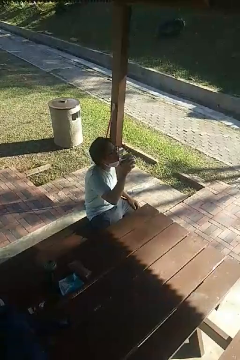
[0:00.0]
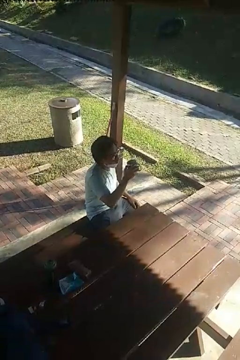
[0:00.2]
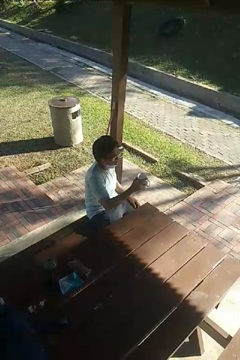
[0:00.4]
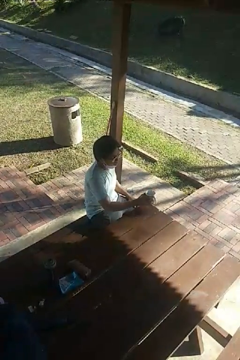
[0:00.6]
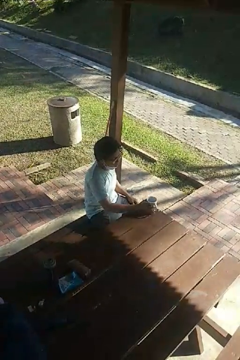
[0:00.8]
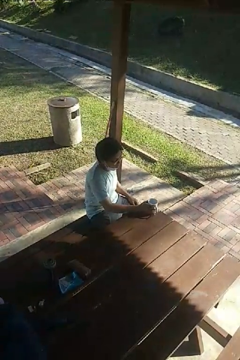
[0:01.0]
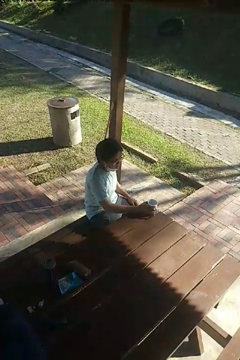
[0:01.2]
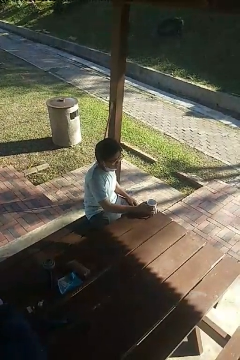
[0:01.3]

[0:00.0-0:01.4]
person puts down object on table

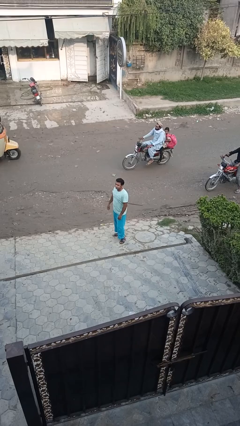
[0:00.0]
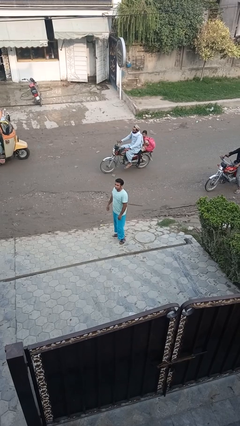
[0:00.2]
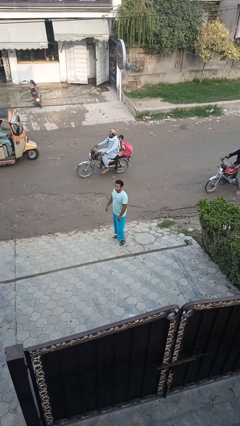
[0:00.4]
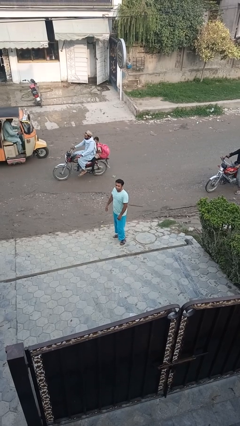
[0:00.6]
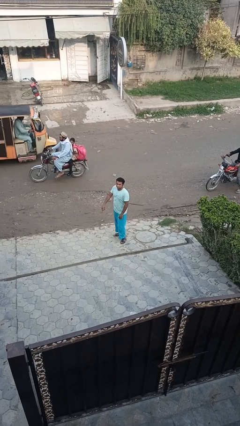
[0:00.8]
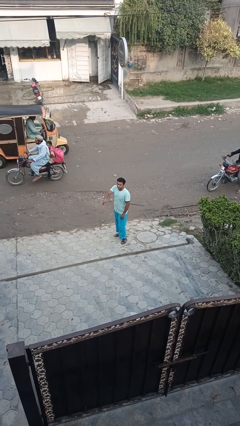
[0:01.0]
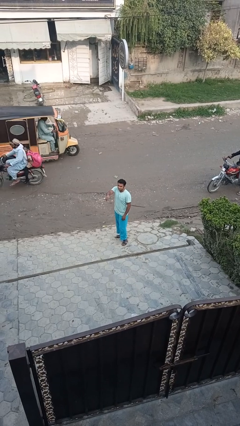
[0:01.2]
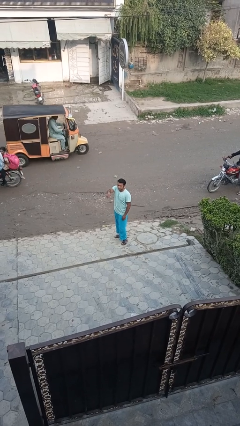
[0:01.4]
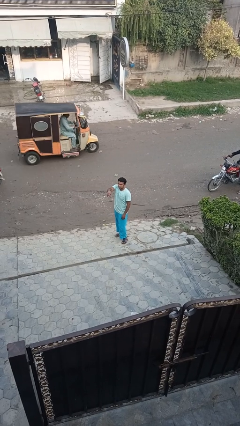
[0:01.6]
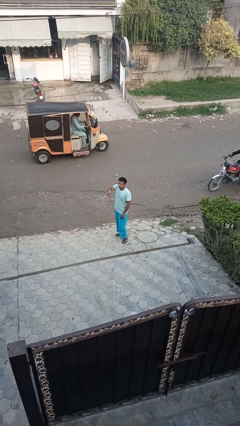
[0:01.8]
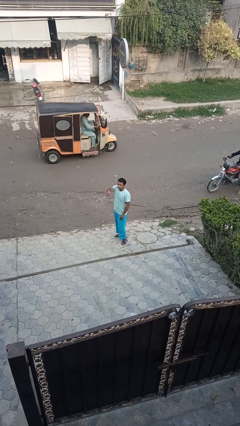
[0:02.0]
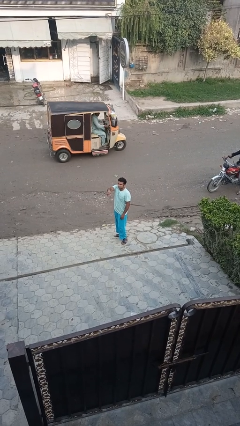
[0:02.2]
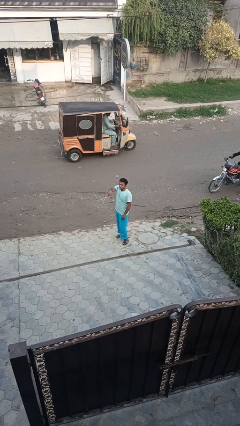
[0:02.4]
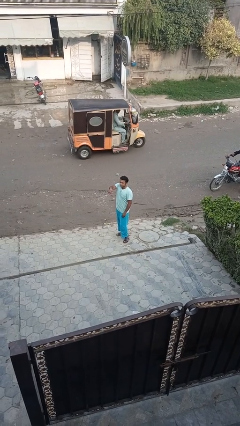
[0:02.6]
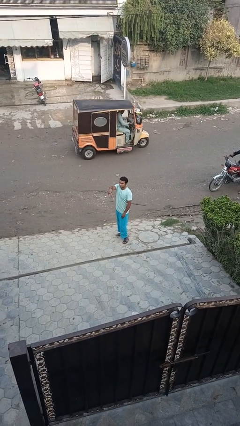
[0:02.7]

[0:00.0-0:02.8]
person points at person

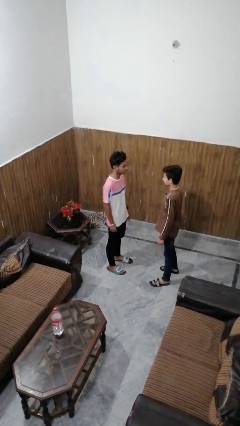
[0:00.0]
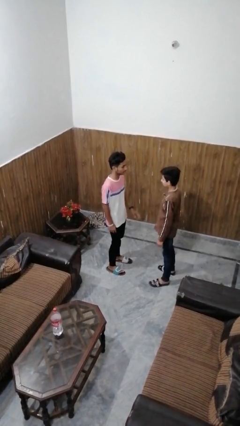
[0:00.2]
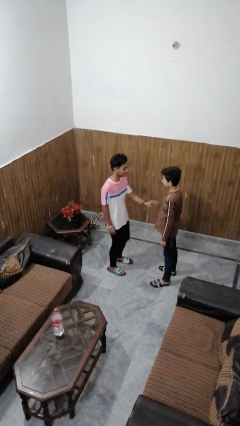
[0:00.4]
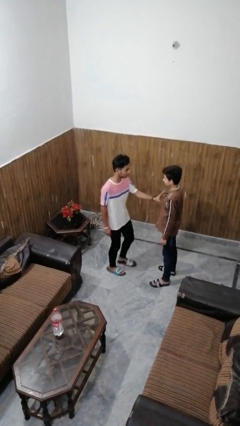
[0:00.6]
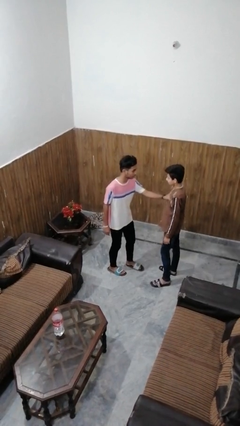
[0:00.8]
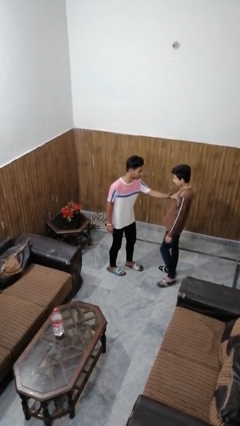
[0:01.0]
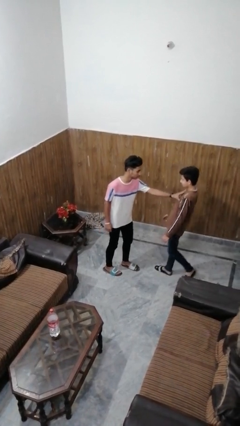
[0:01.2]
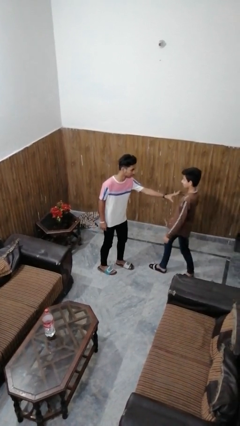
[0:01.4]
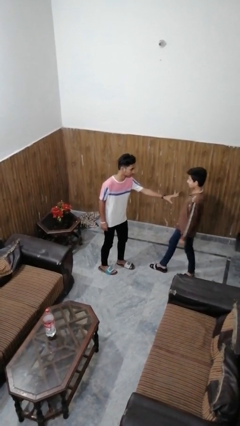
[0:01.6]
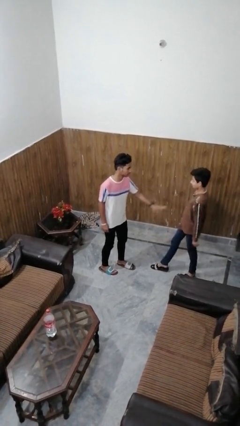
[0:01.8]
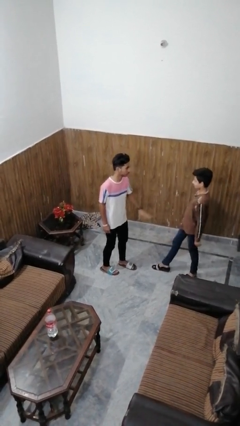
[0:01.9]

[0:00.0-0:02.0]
person shoves person

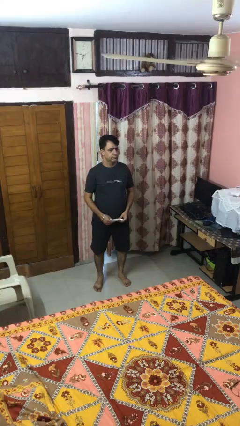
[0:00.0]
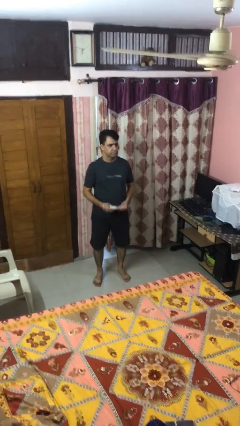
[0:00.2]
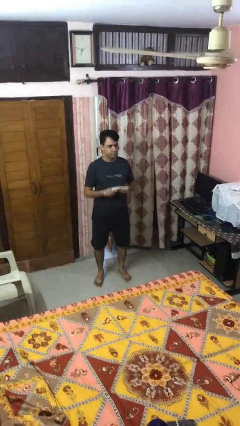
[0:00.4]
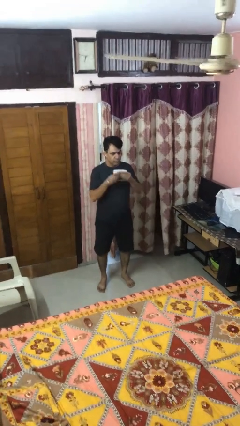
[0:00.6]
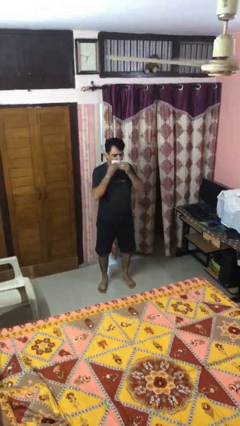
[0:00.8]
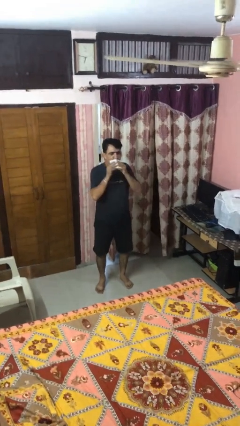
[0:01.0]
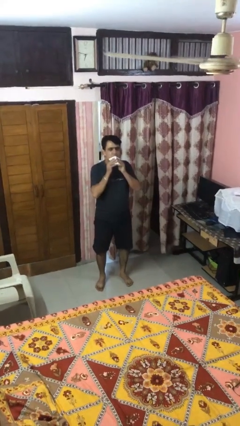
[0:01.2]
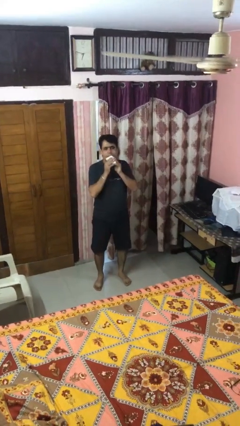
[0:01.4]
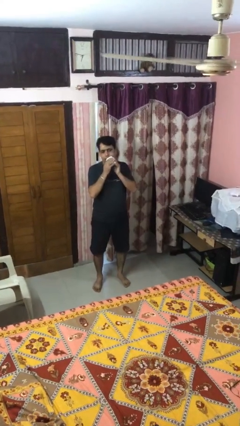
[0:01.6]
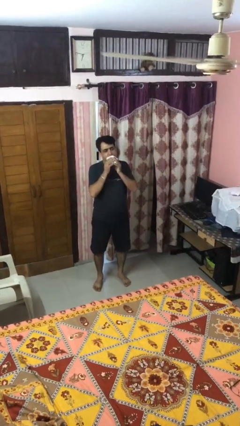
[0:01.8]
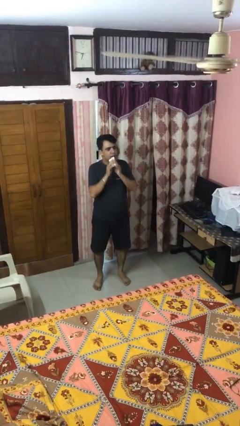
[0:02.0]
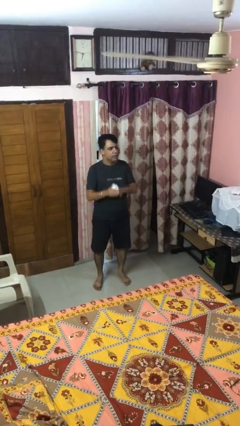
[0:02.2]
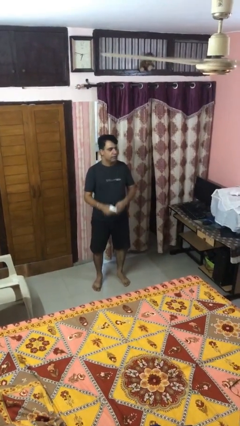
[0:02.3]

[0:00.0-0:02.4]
person wipes mouth with napkin

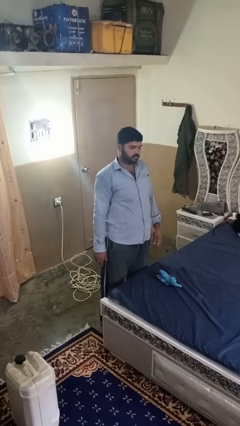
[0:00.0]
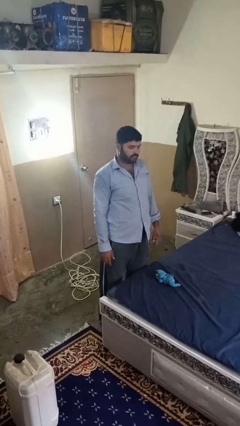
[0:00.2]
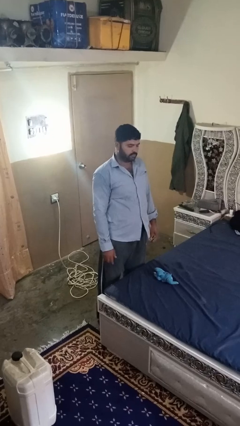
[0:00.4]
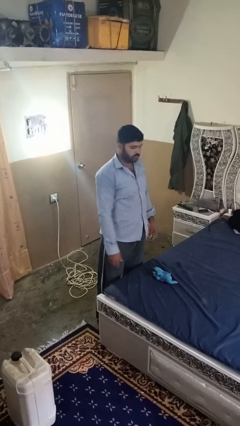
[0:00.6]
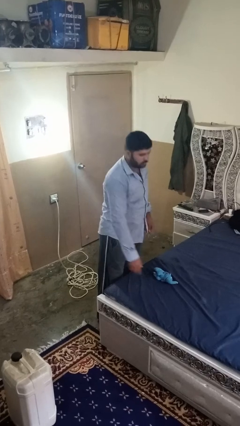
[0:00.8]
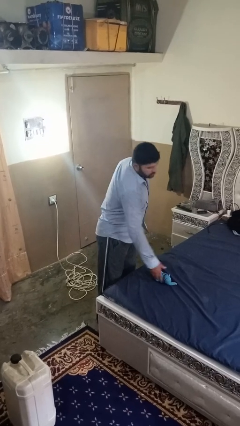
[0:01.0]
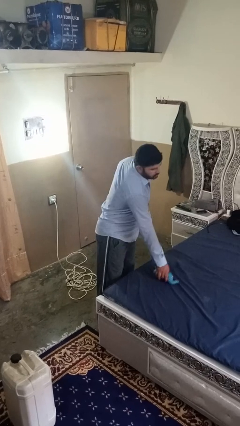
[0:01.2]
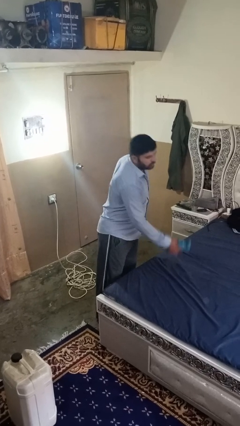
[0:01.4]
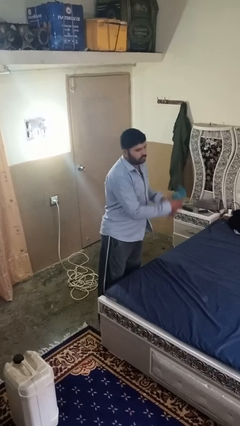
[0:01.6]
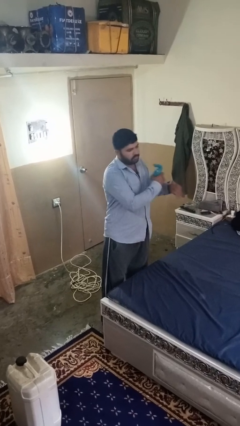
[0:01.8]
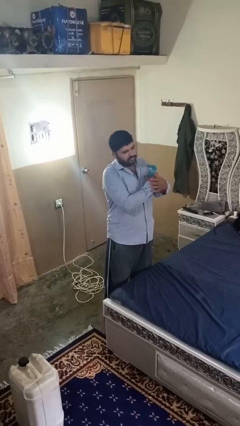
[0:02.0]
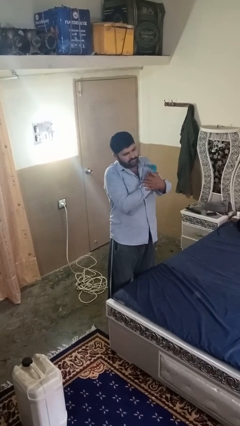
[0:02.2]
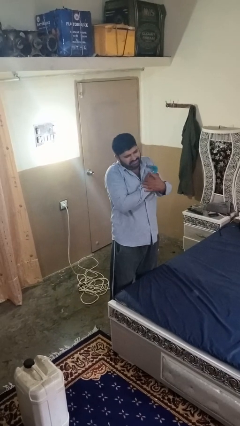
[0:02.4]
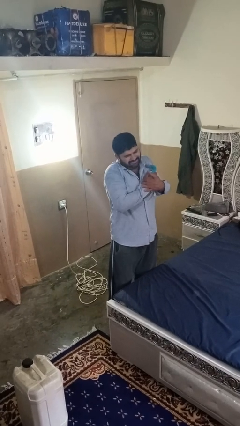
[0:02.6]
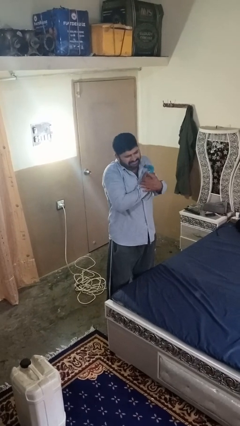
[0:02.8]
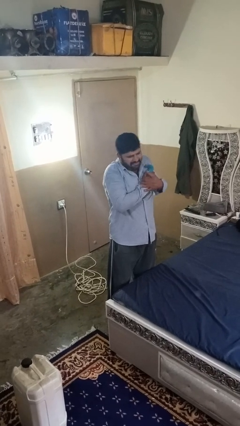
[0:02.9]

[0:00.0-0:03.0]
person hugs stuffed animal

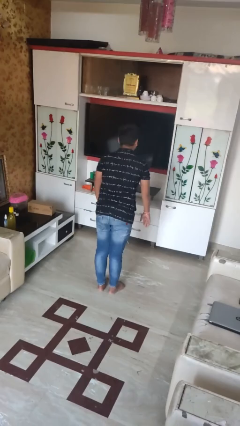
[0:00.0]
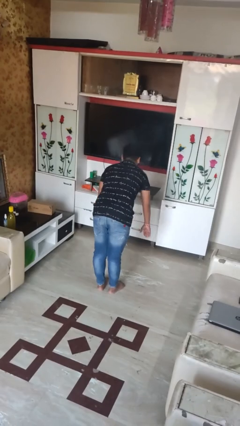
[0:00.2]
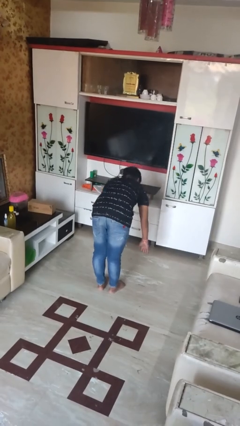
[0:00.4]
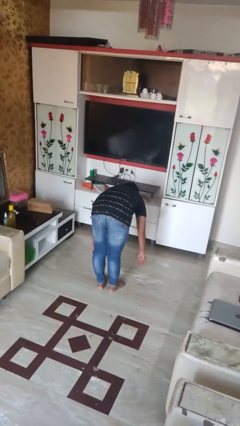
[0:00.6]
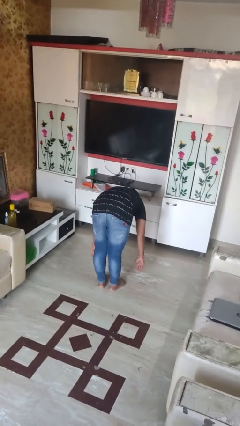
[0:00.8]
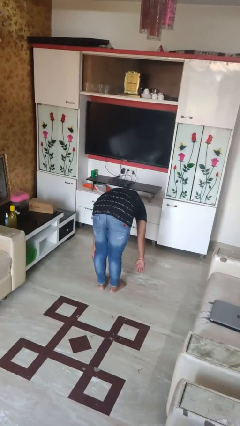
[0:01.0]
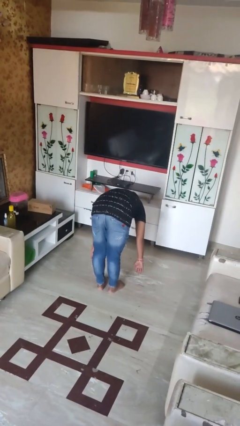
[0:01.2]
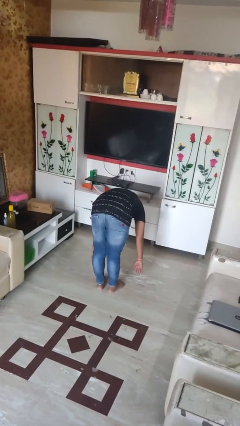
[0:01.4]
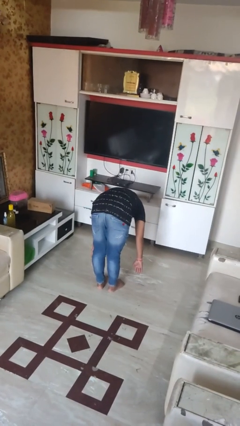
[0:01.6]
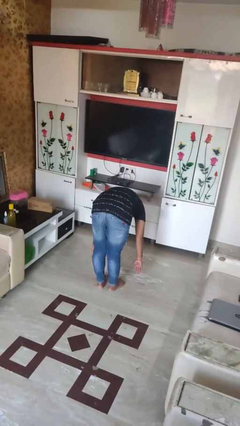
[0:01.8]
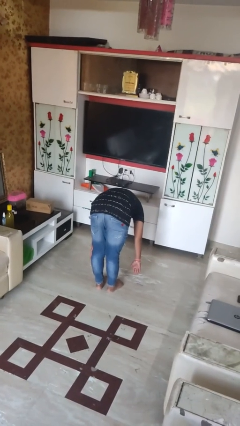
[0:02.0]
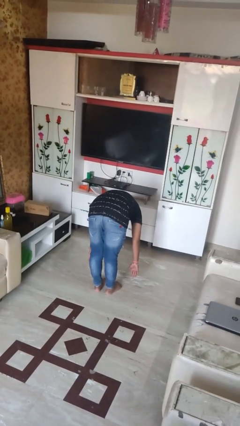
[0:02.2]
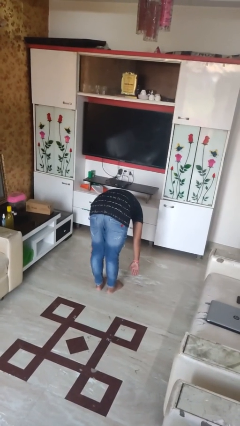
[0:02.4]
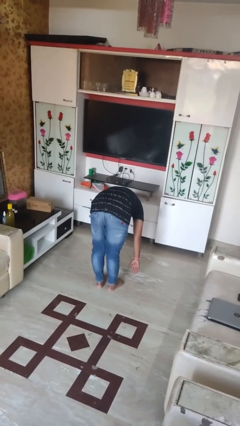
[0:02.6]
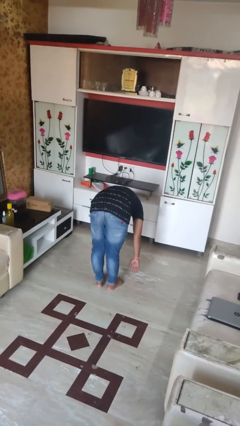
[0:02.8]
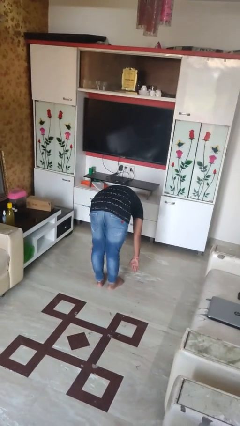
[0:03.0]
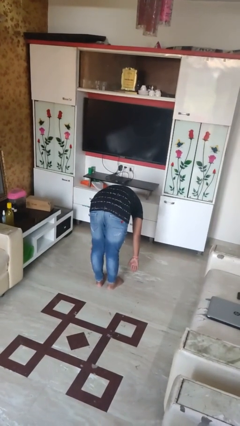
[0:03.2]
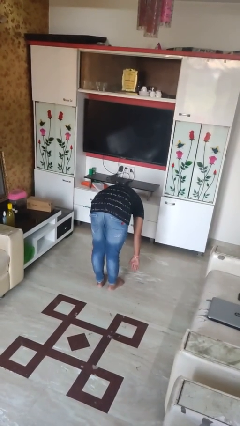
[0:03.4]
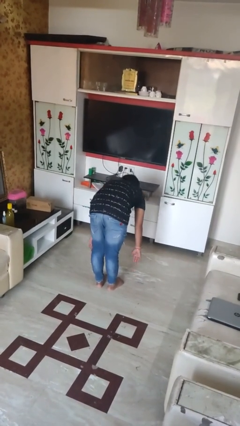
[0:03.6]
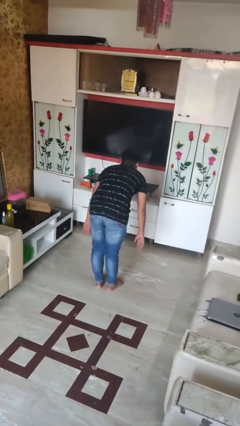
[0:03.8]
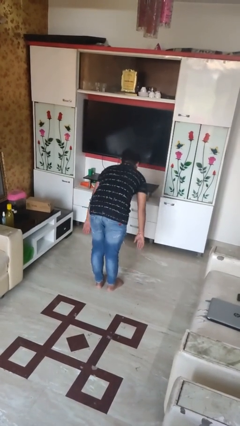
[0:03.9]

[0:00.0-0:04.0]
person bows

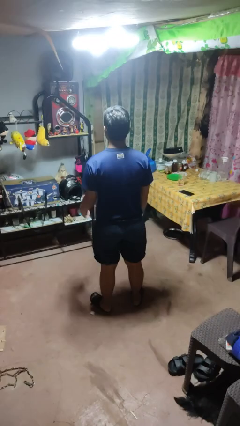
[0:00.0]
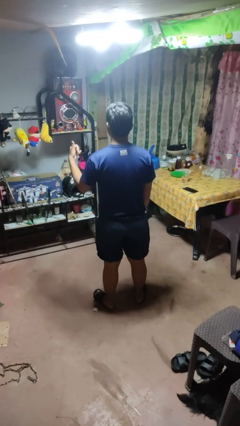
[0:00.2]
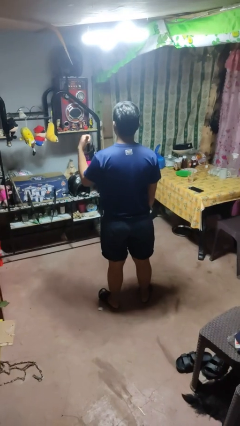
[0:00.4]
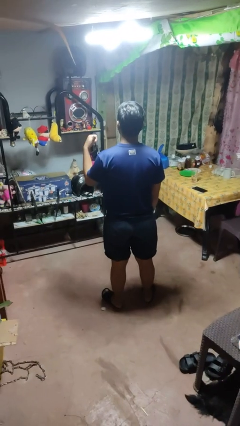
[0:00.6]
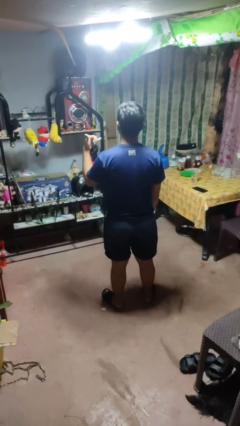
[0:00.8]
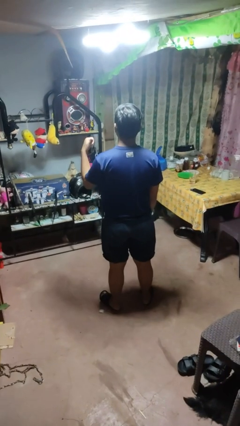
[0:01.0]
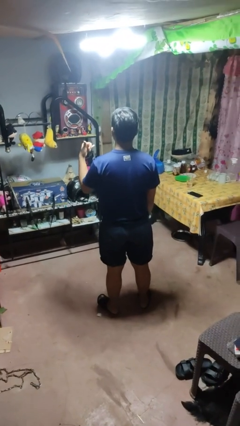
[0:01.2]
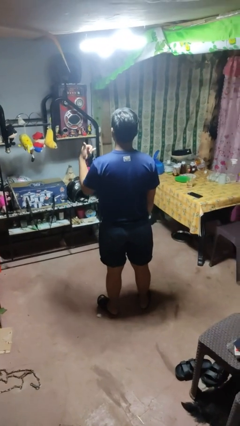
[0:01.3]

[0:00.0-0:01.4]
person gestures hang loose
